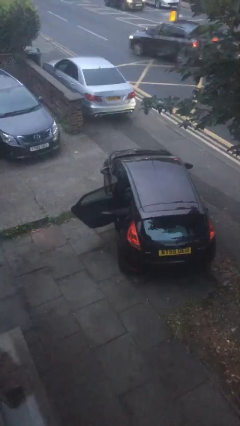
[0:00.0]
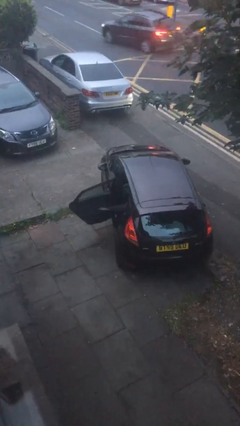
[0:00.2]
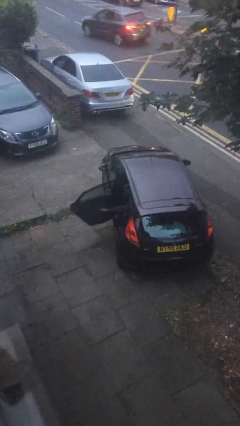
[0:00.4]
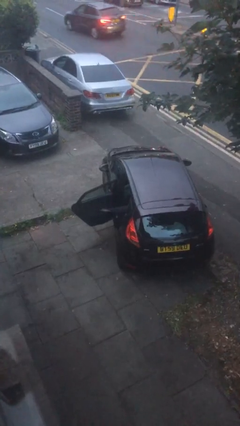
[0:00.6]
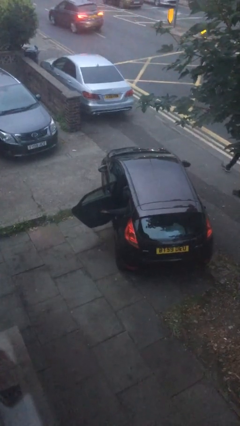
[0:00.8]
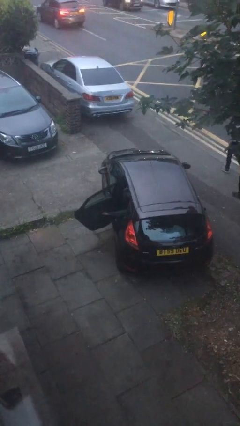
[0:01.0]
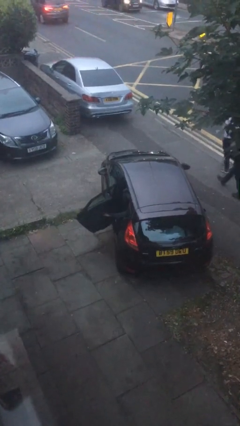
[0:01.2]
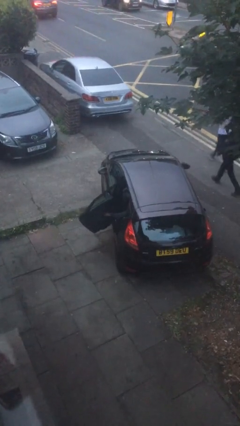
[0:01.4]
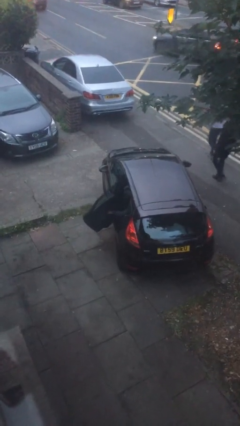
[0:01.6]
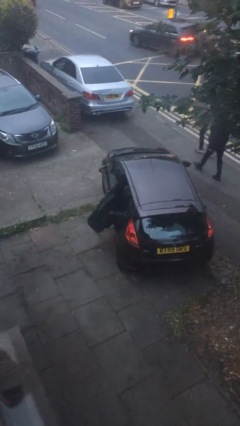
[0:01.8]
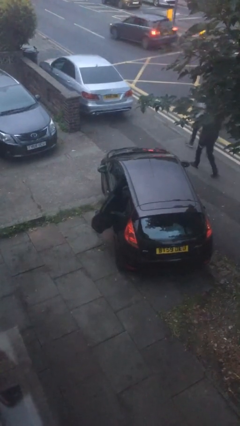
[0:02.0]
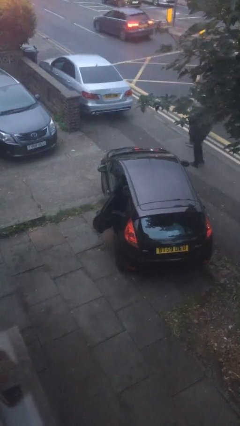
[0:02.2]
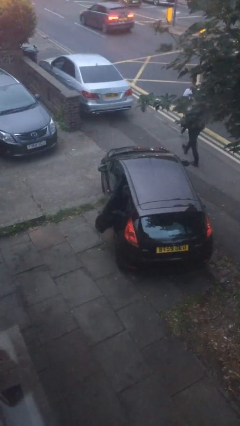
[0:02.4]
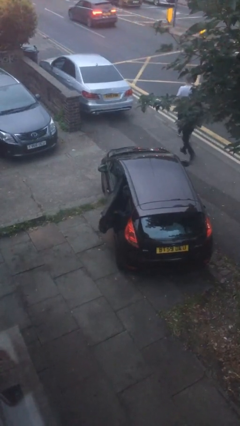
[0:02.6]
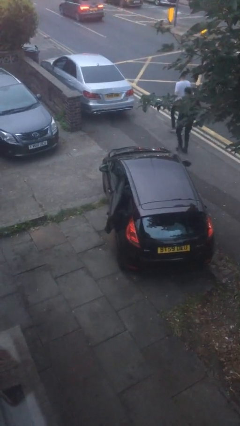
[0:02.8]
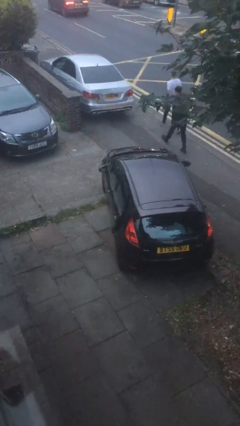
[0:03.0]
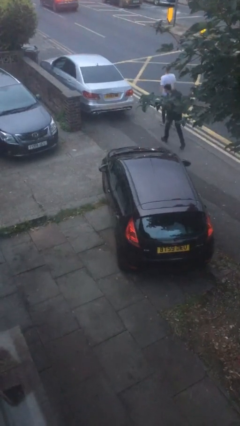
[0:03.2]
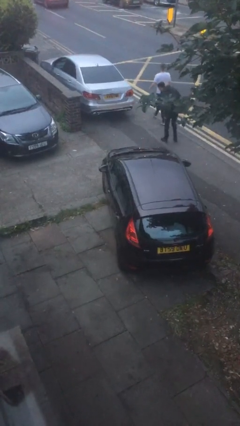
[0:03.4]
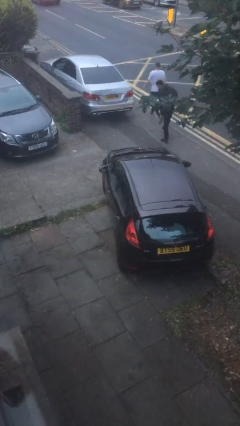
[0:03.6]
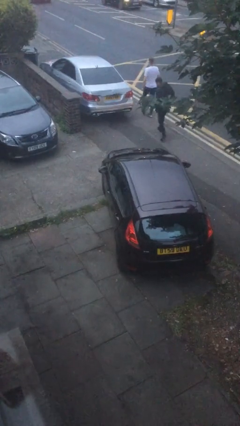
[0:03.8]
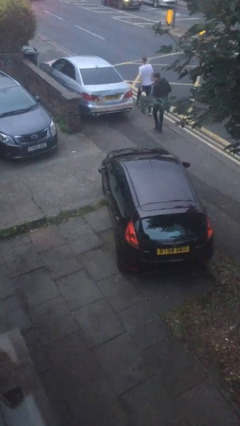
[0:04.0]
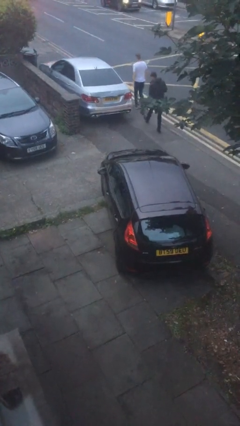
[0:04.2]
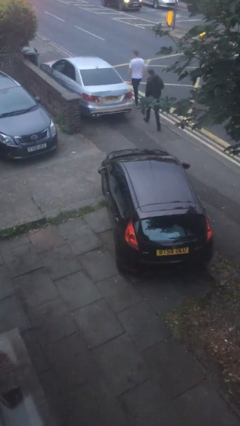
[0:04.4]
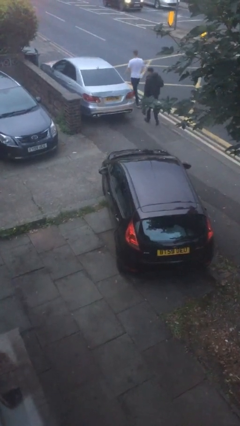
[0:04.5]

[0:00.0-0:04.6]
person closes car door

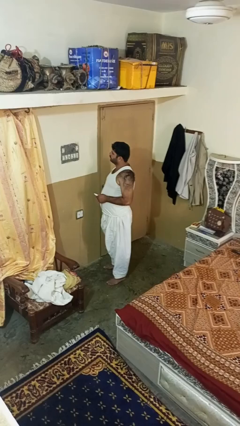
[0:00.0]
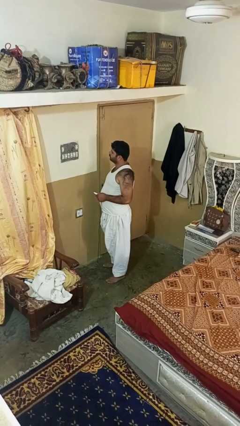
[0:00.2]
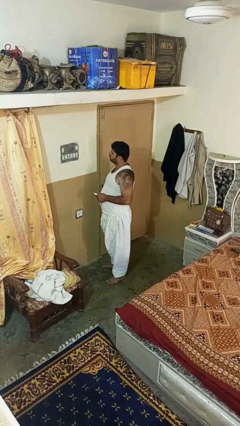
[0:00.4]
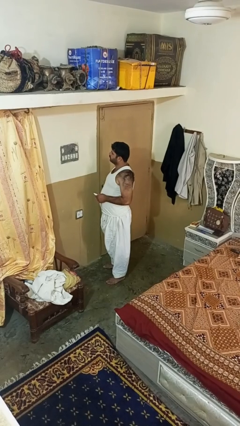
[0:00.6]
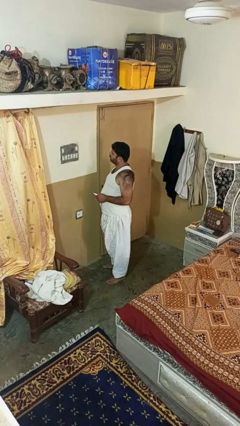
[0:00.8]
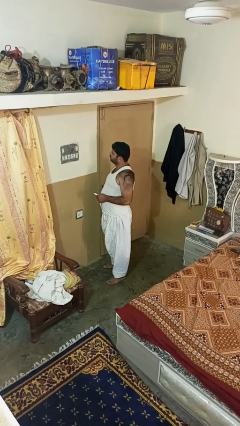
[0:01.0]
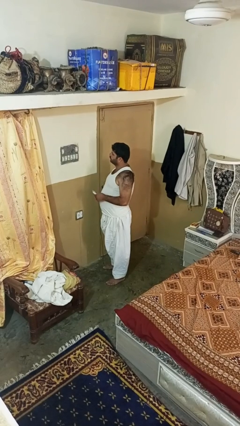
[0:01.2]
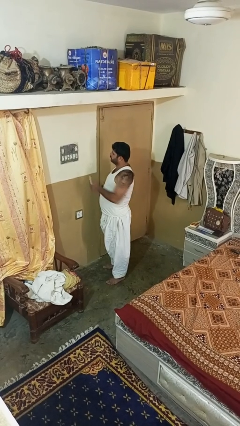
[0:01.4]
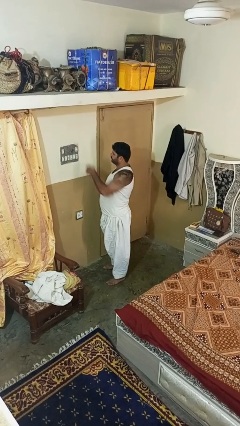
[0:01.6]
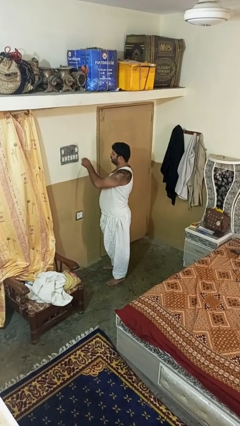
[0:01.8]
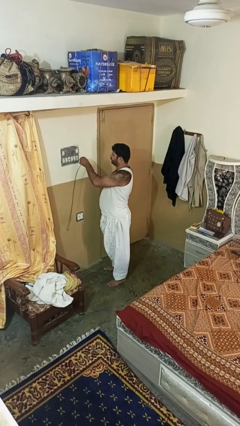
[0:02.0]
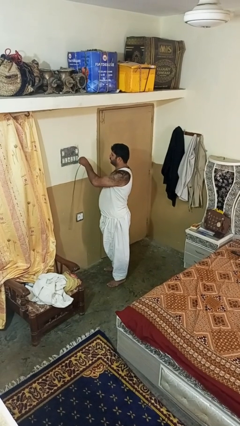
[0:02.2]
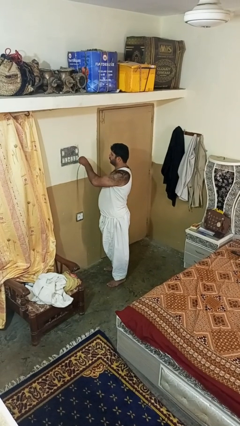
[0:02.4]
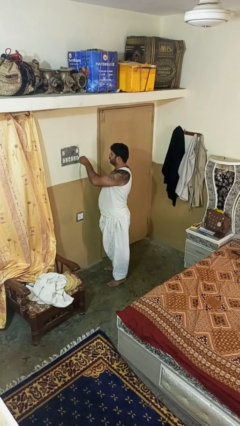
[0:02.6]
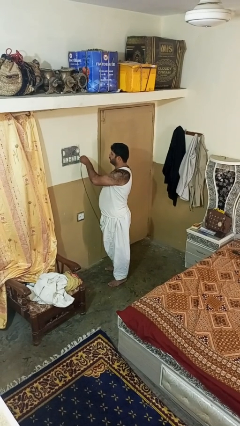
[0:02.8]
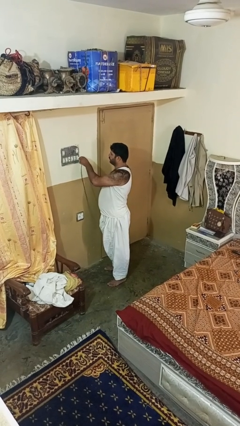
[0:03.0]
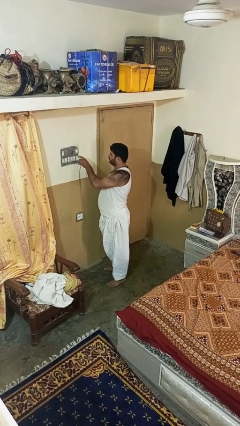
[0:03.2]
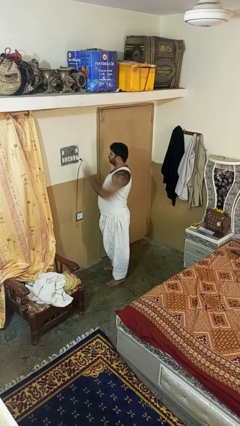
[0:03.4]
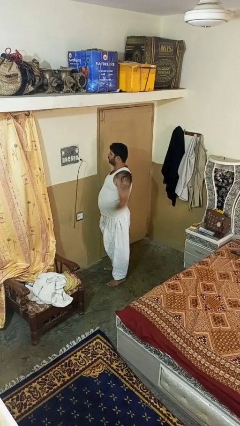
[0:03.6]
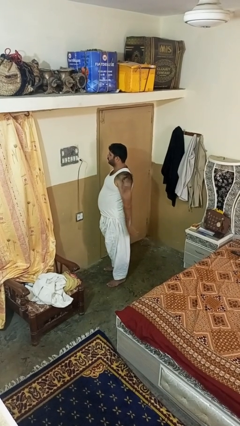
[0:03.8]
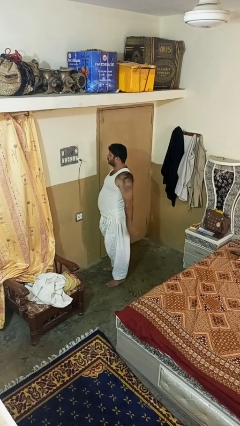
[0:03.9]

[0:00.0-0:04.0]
person plugs into electrical socket

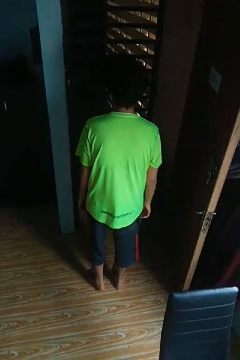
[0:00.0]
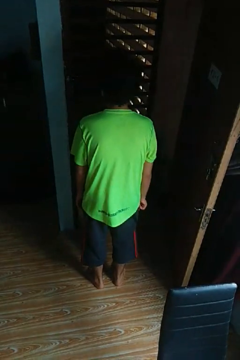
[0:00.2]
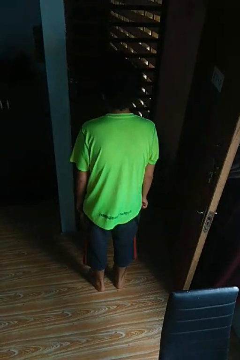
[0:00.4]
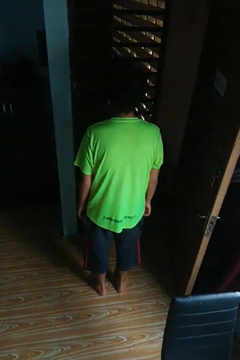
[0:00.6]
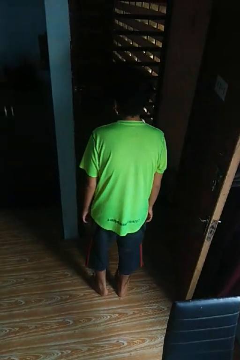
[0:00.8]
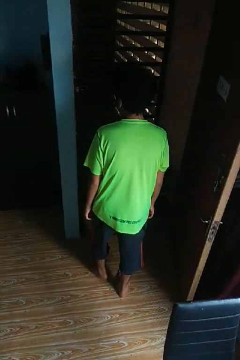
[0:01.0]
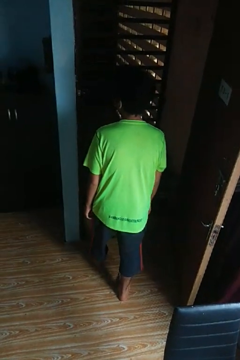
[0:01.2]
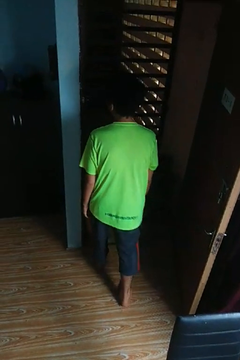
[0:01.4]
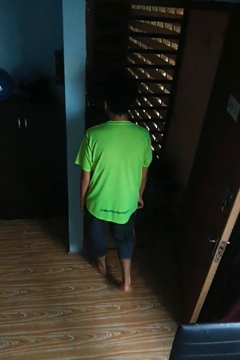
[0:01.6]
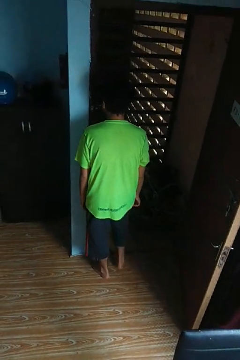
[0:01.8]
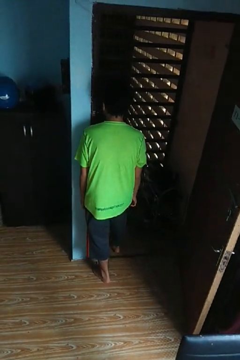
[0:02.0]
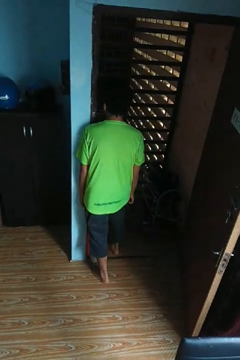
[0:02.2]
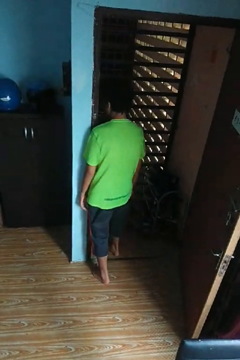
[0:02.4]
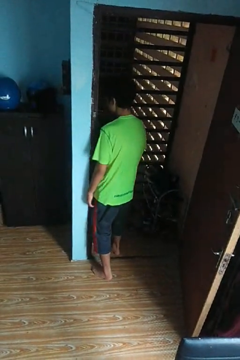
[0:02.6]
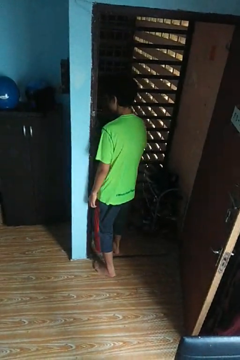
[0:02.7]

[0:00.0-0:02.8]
person bumps into wall

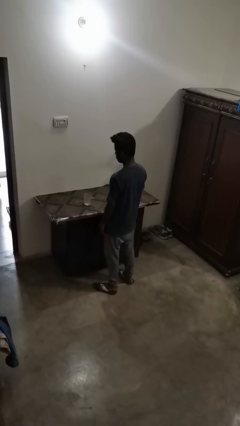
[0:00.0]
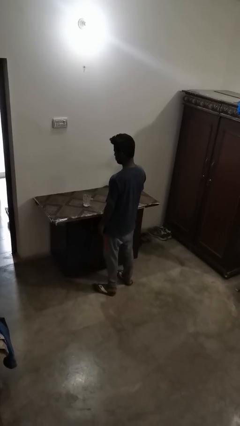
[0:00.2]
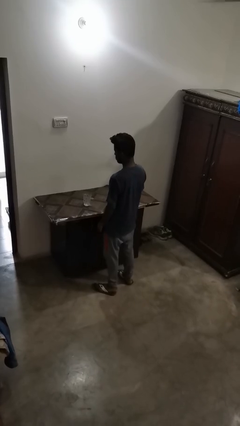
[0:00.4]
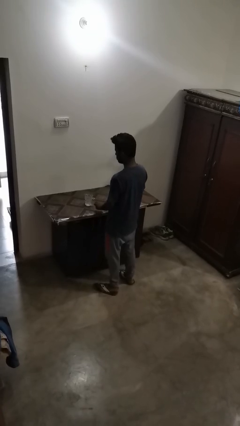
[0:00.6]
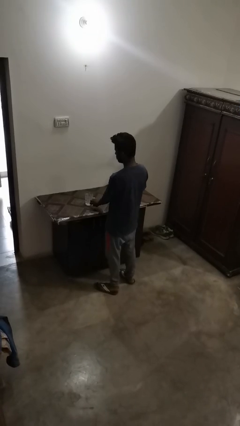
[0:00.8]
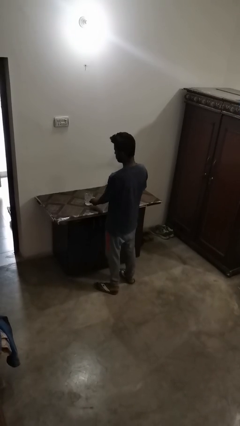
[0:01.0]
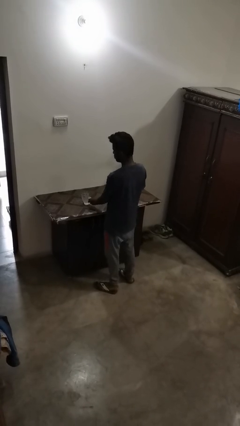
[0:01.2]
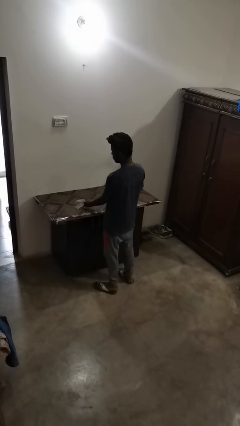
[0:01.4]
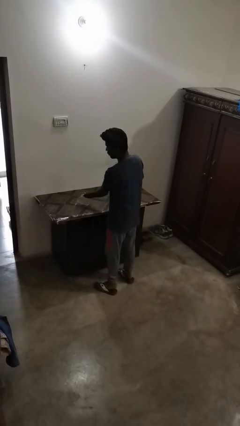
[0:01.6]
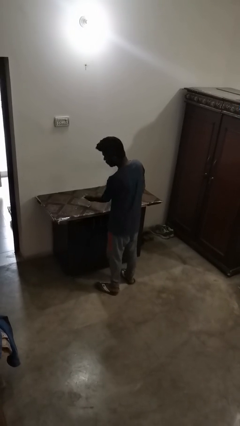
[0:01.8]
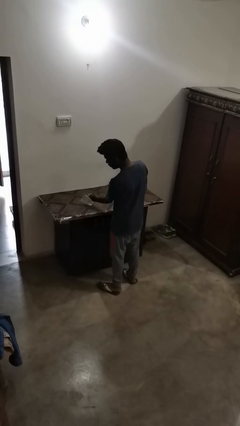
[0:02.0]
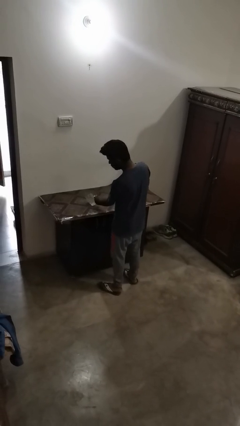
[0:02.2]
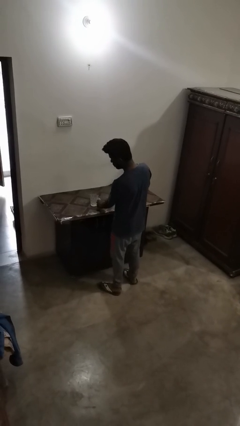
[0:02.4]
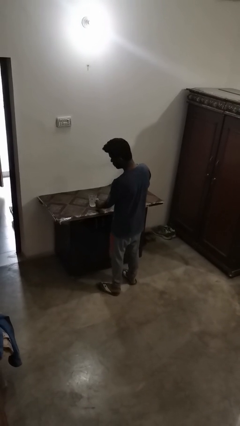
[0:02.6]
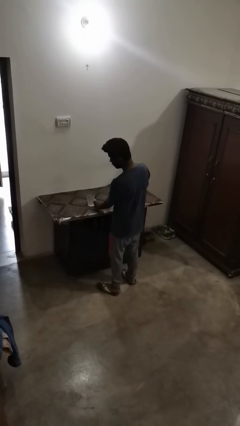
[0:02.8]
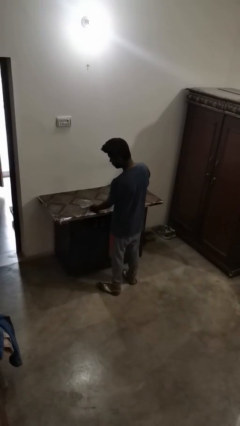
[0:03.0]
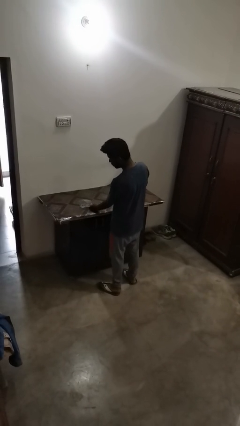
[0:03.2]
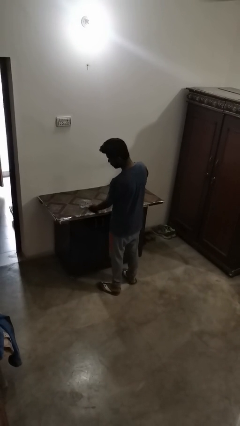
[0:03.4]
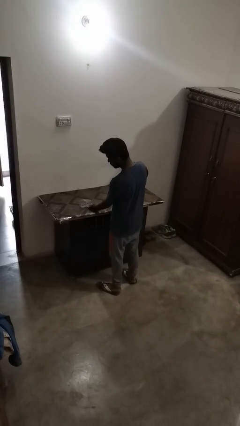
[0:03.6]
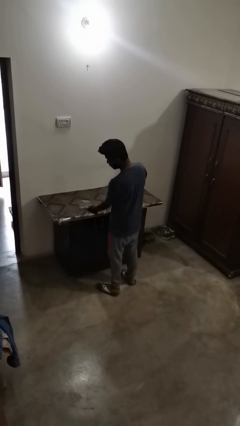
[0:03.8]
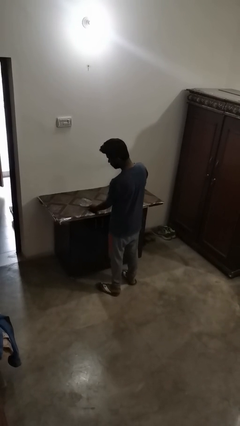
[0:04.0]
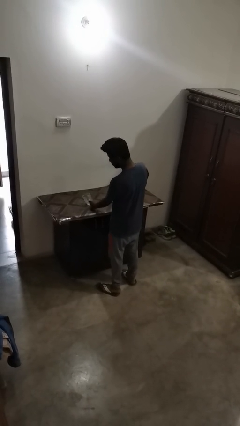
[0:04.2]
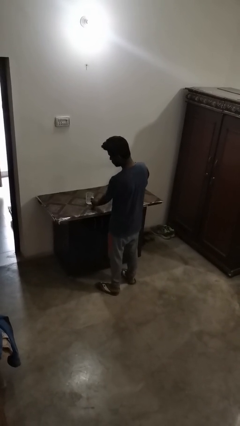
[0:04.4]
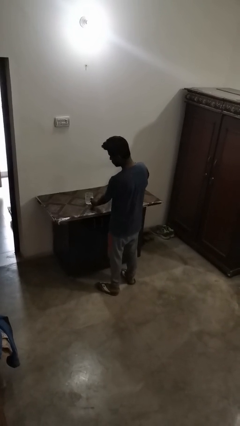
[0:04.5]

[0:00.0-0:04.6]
person spills on table

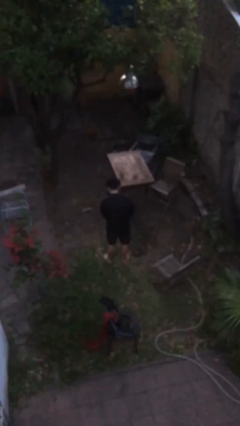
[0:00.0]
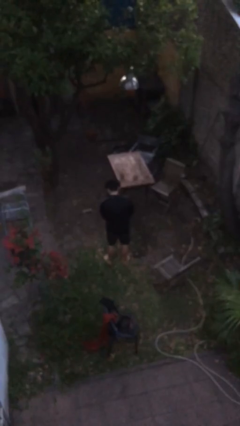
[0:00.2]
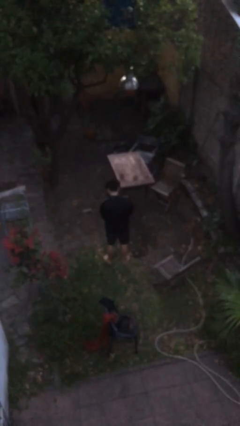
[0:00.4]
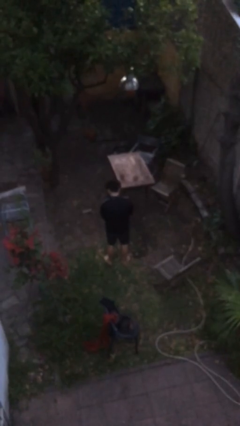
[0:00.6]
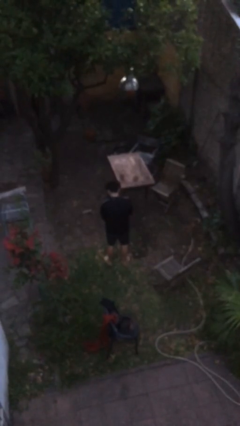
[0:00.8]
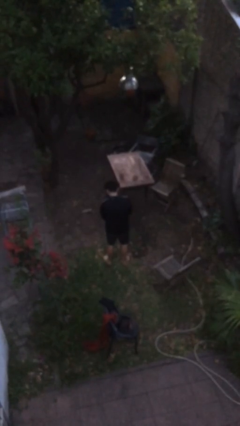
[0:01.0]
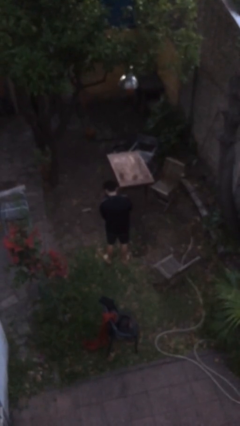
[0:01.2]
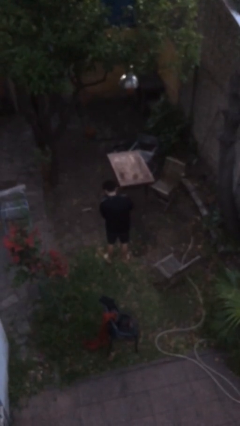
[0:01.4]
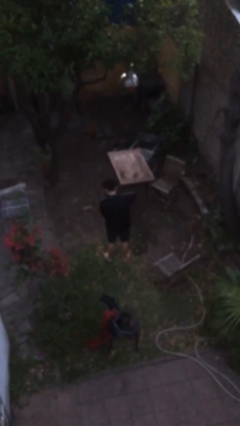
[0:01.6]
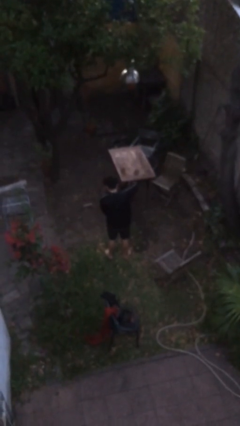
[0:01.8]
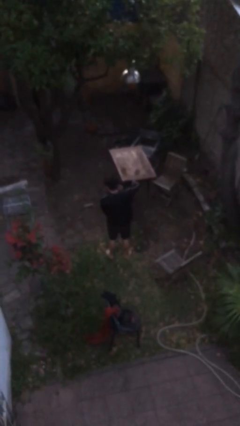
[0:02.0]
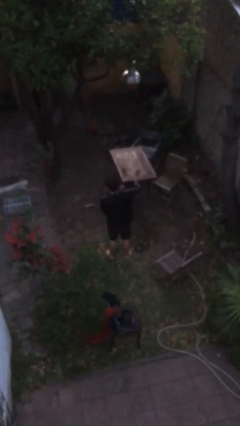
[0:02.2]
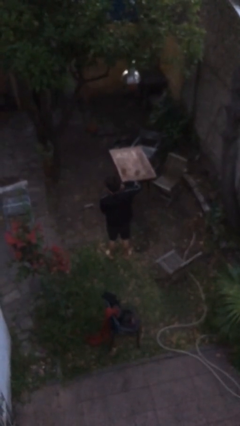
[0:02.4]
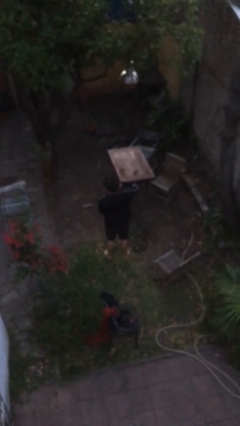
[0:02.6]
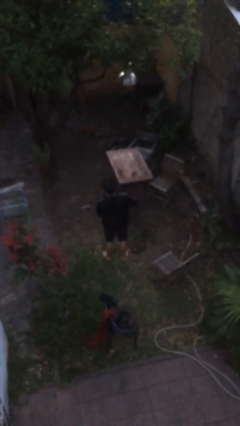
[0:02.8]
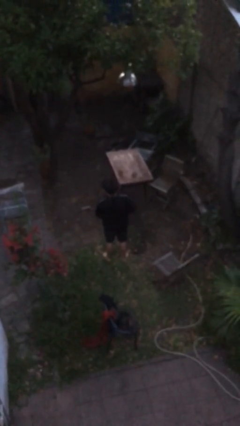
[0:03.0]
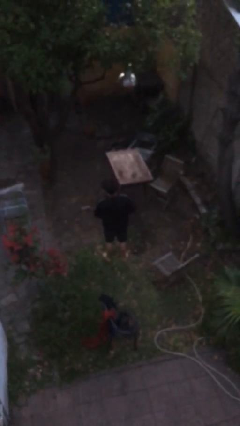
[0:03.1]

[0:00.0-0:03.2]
person zips up jacket